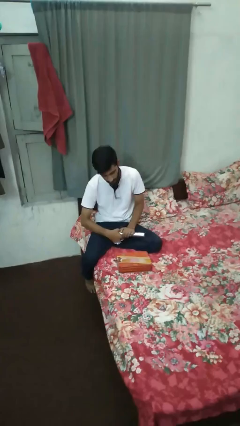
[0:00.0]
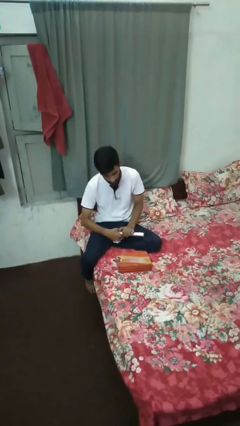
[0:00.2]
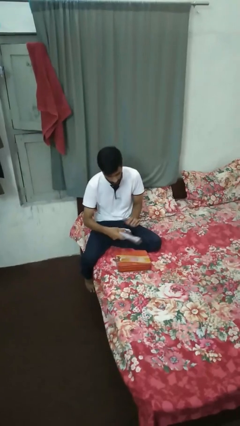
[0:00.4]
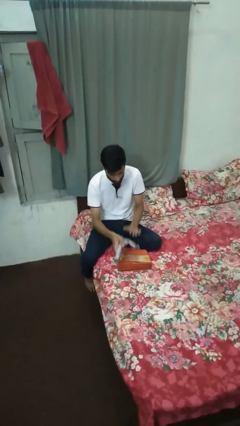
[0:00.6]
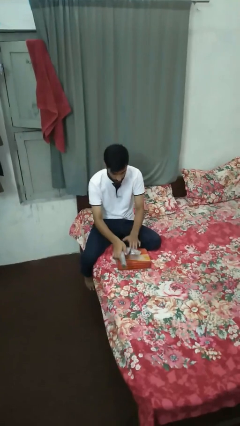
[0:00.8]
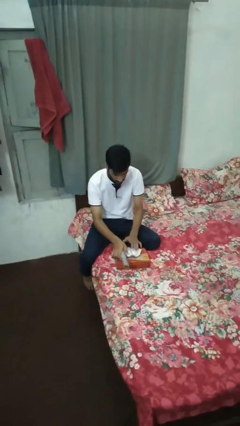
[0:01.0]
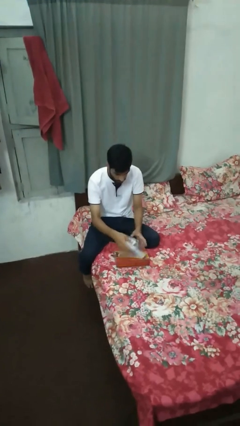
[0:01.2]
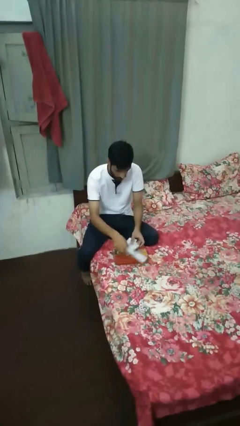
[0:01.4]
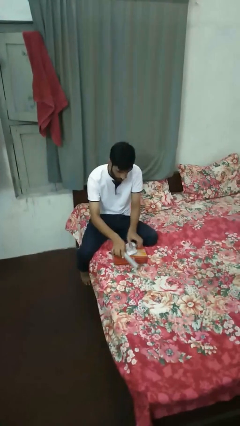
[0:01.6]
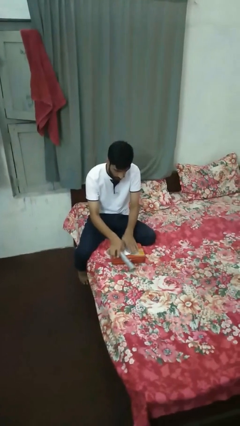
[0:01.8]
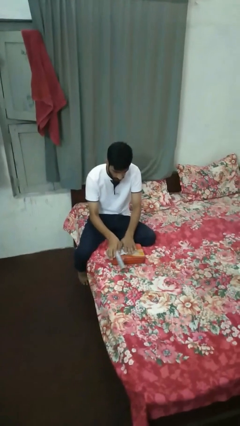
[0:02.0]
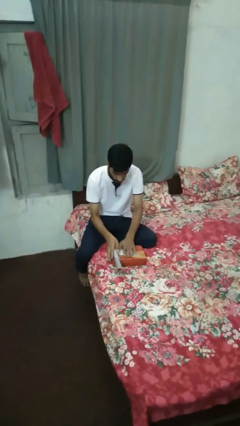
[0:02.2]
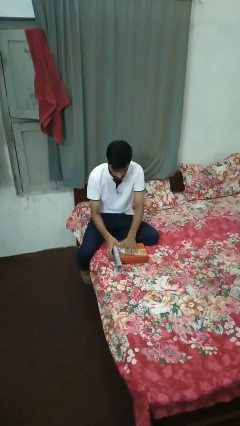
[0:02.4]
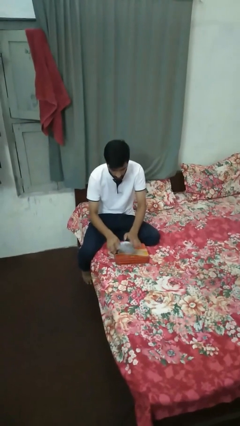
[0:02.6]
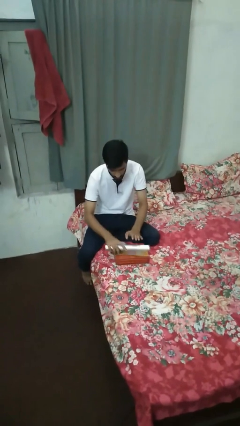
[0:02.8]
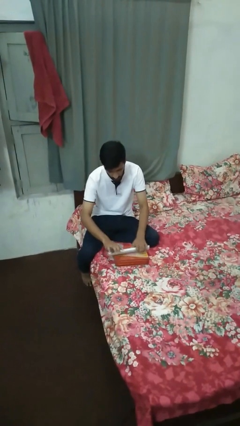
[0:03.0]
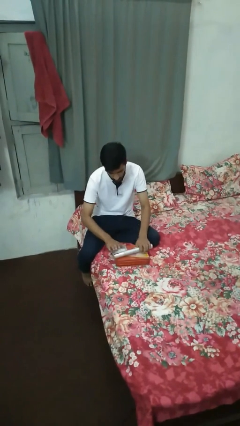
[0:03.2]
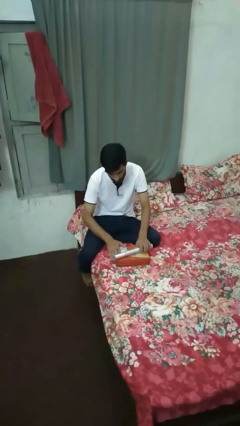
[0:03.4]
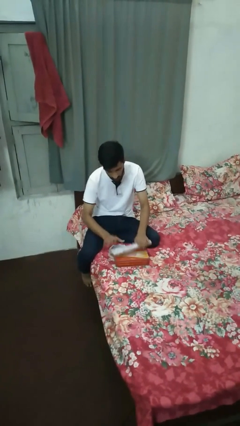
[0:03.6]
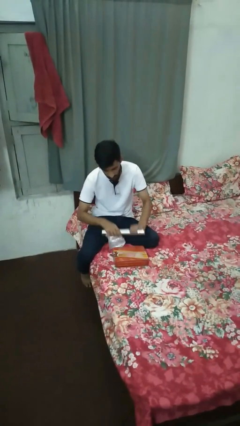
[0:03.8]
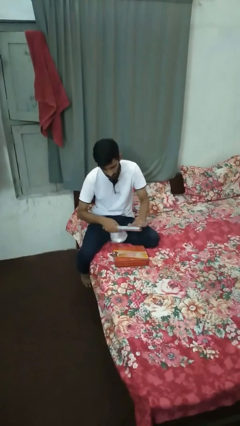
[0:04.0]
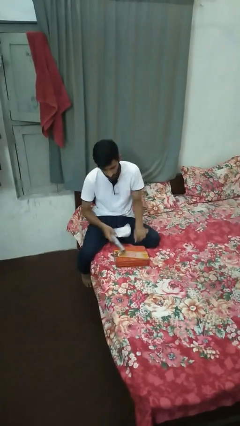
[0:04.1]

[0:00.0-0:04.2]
person wraps box

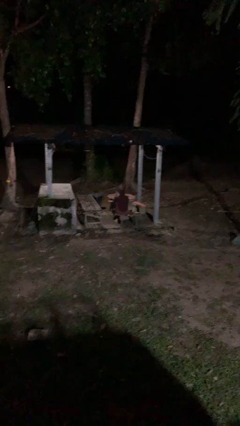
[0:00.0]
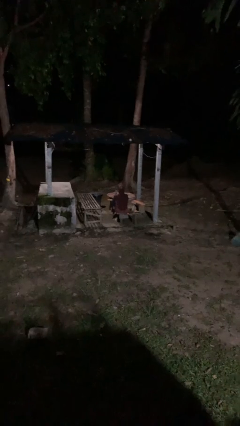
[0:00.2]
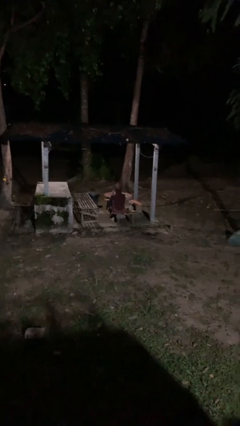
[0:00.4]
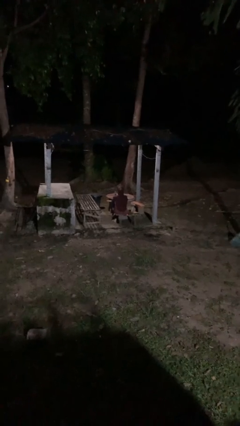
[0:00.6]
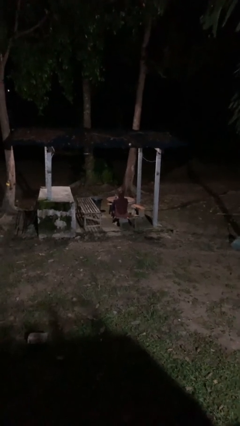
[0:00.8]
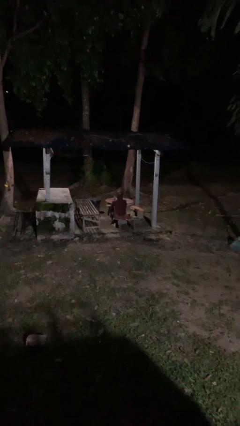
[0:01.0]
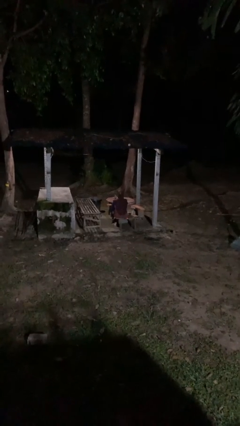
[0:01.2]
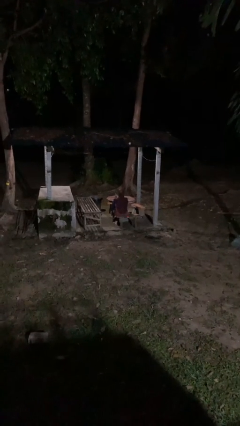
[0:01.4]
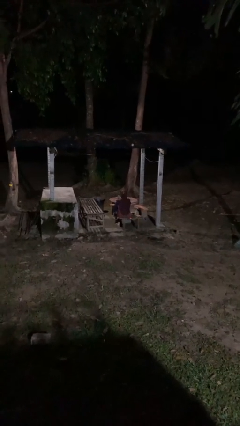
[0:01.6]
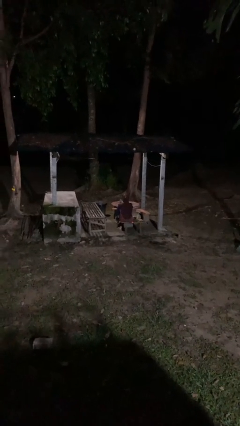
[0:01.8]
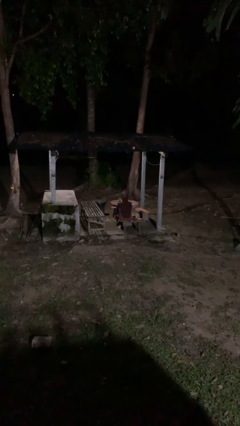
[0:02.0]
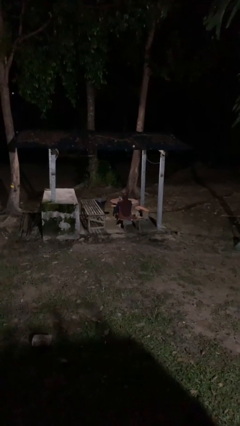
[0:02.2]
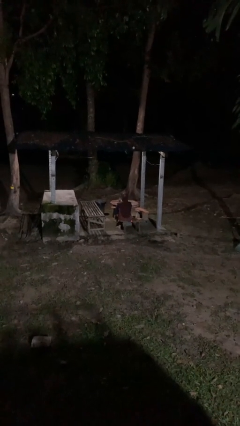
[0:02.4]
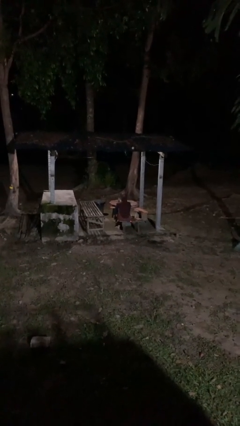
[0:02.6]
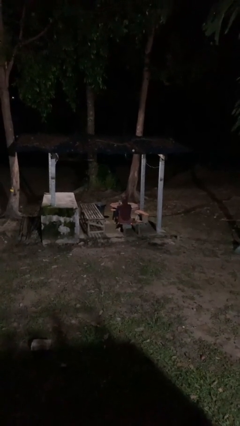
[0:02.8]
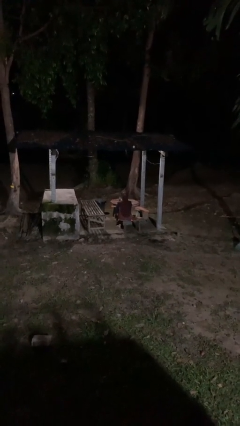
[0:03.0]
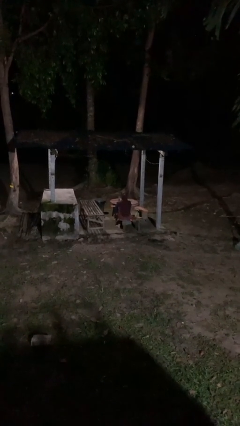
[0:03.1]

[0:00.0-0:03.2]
person gestures cut

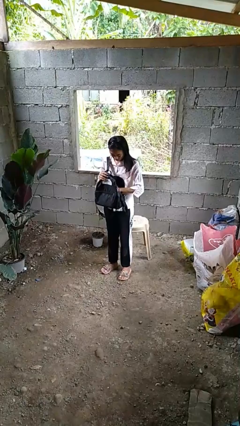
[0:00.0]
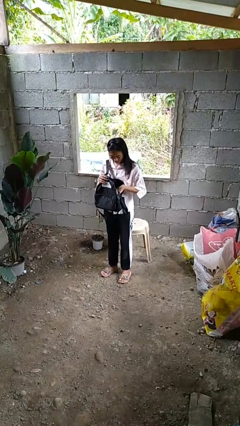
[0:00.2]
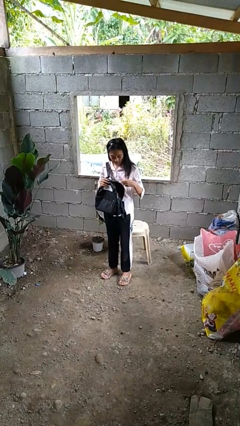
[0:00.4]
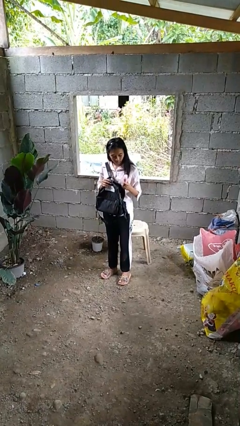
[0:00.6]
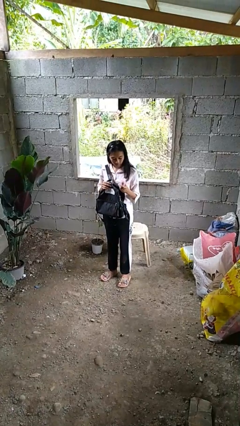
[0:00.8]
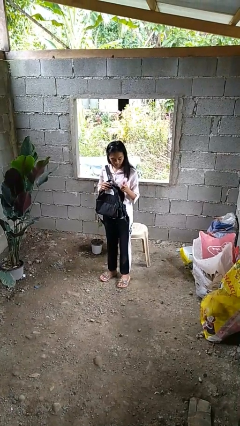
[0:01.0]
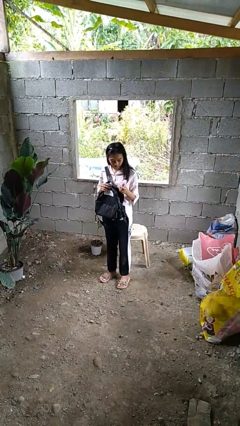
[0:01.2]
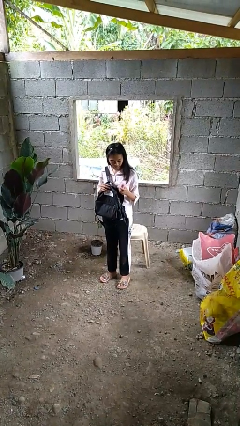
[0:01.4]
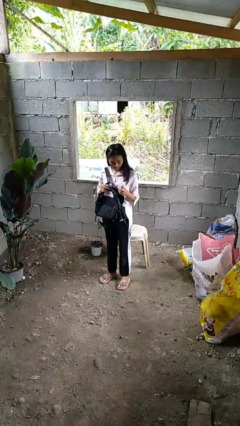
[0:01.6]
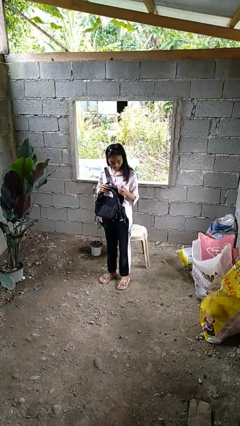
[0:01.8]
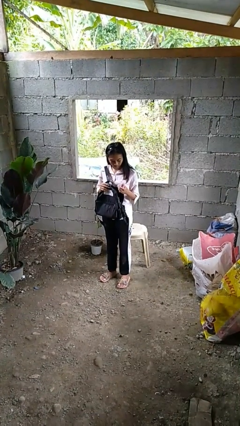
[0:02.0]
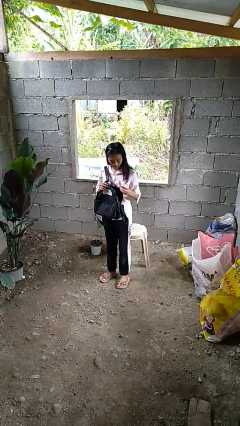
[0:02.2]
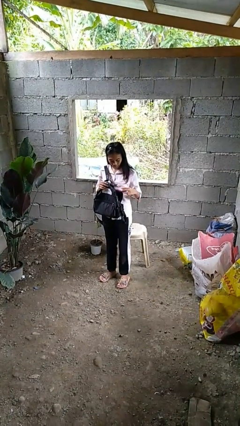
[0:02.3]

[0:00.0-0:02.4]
person takes object from backpack

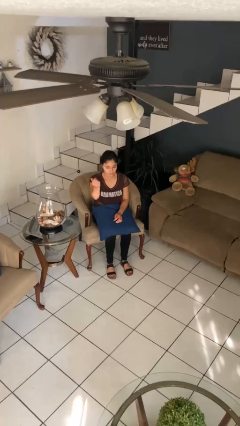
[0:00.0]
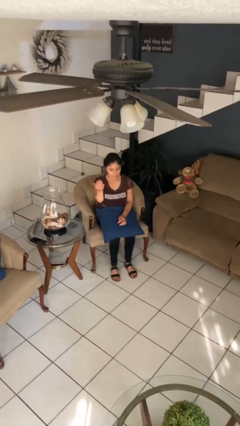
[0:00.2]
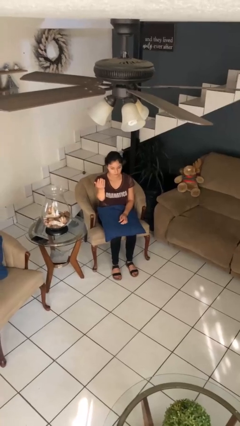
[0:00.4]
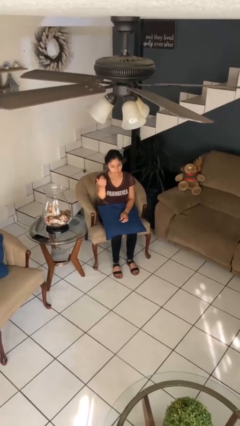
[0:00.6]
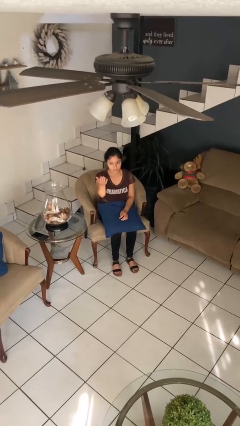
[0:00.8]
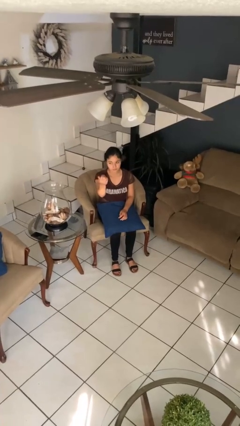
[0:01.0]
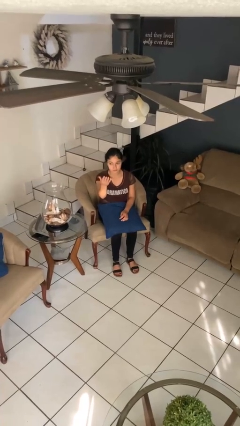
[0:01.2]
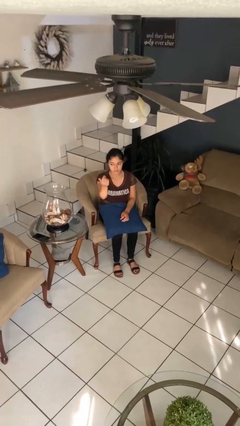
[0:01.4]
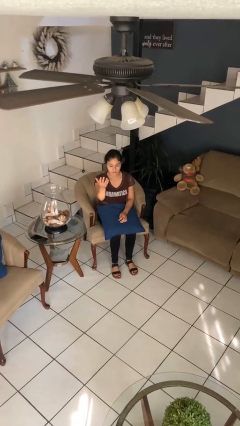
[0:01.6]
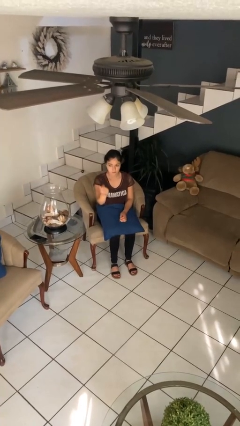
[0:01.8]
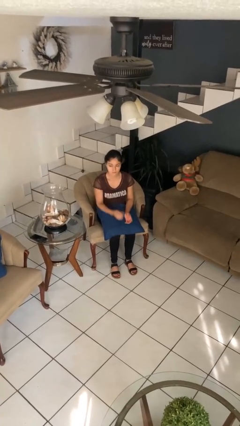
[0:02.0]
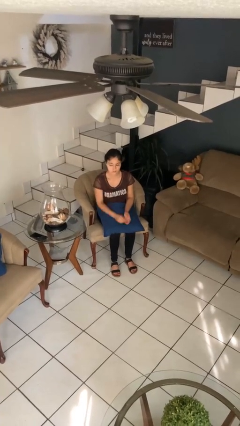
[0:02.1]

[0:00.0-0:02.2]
person gestures come here

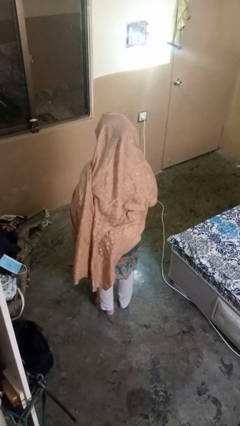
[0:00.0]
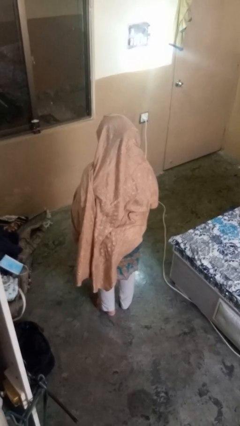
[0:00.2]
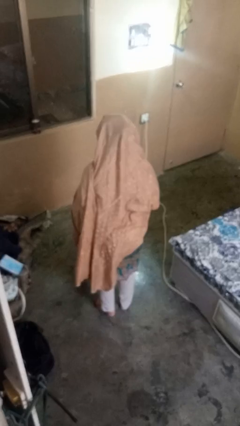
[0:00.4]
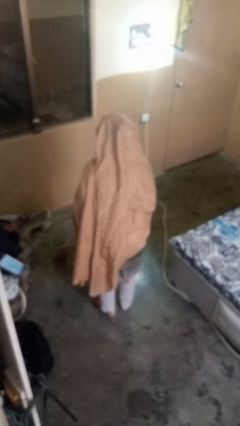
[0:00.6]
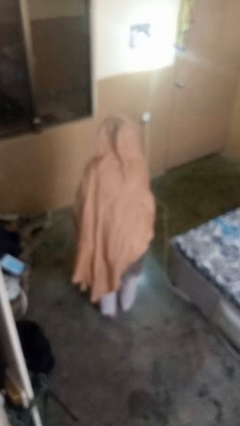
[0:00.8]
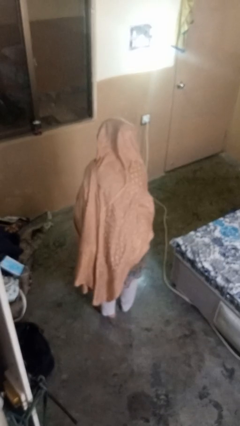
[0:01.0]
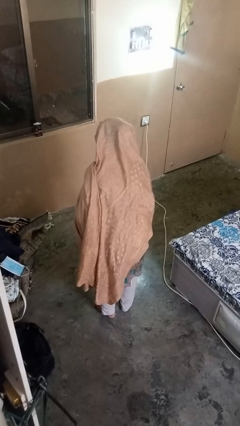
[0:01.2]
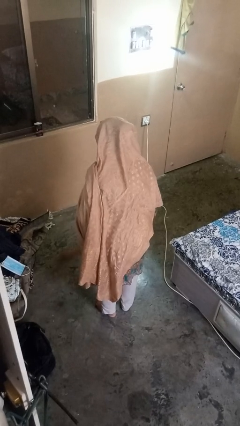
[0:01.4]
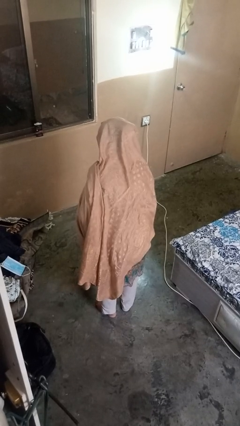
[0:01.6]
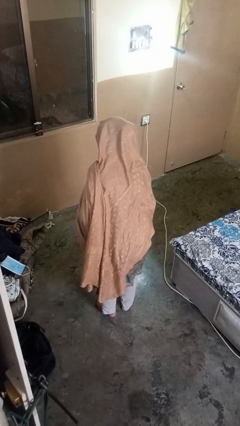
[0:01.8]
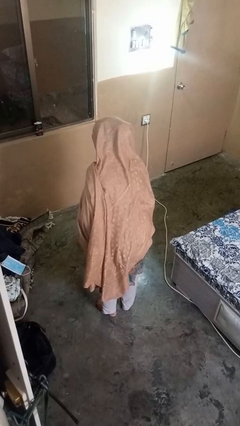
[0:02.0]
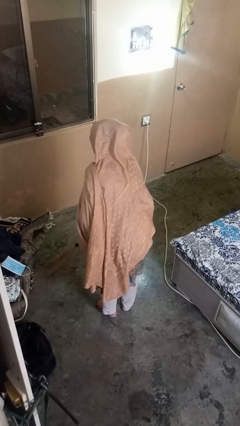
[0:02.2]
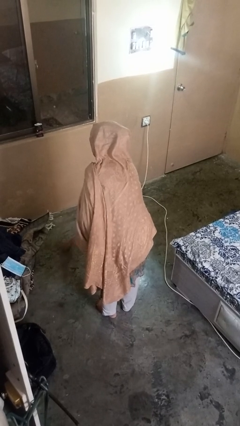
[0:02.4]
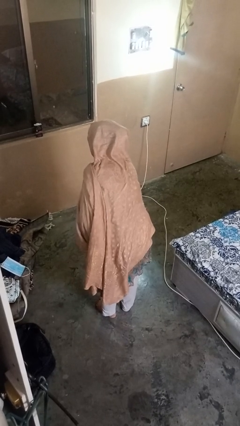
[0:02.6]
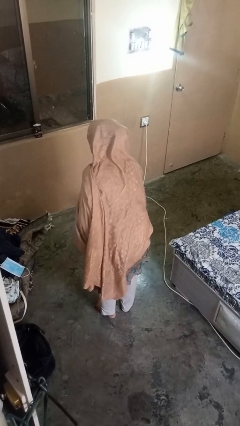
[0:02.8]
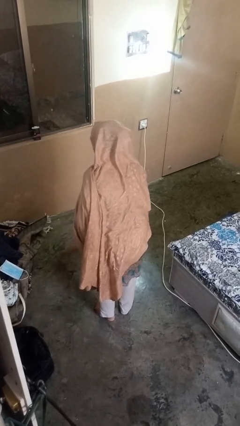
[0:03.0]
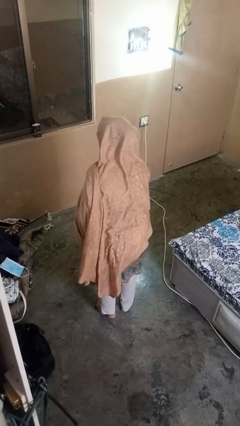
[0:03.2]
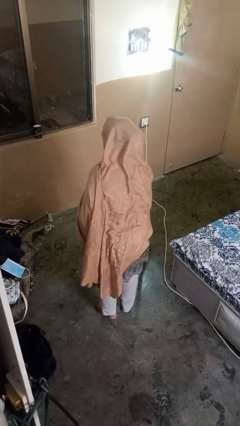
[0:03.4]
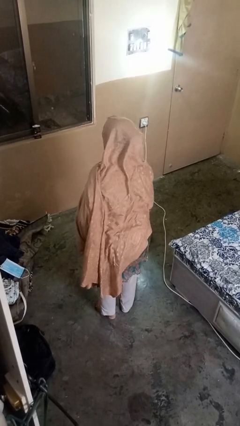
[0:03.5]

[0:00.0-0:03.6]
person sweeps floor

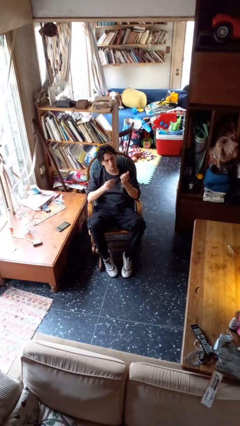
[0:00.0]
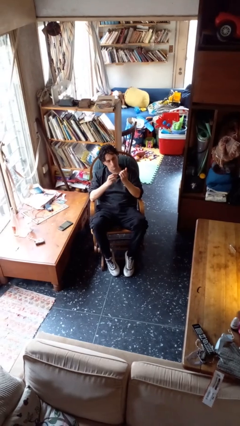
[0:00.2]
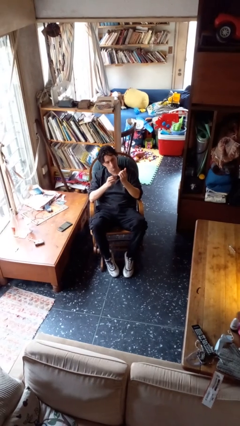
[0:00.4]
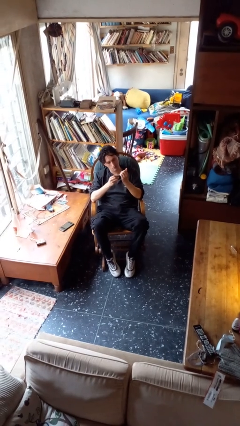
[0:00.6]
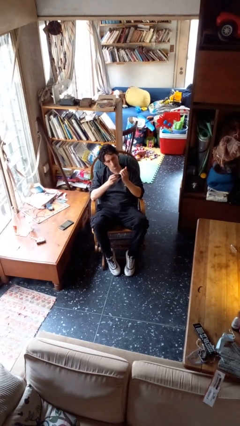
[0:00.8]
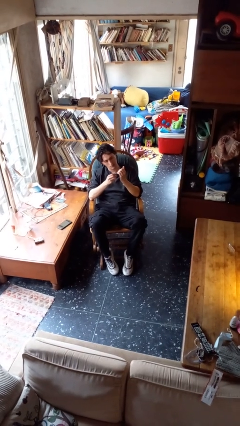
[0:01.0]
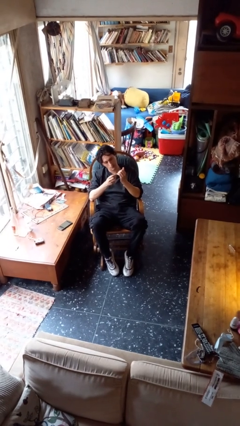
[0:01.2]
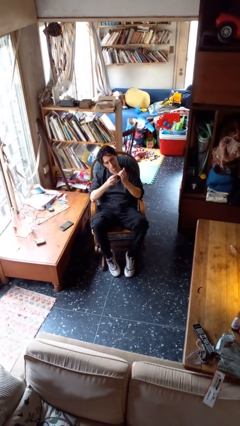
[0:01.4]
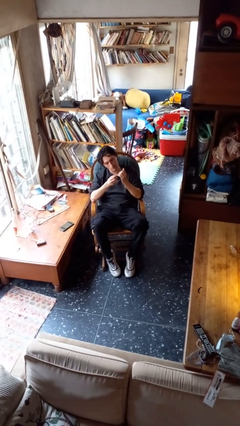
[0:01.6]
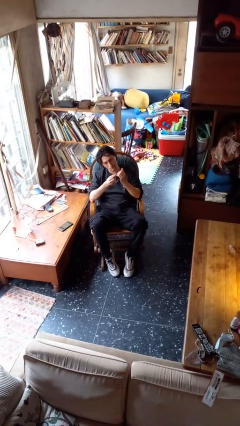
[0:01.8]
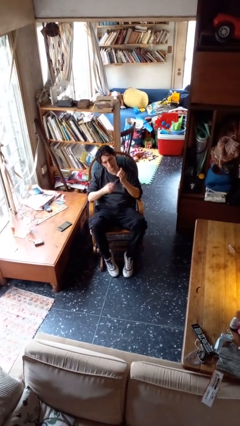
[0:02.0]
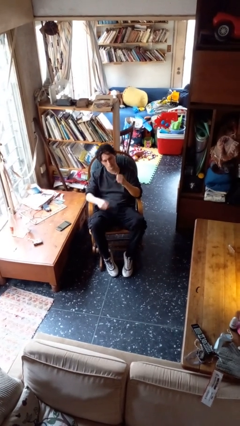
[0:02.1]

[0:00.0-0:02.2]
person files fingernails
